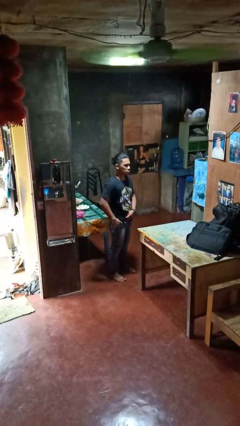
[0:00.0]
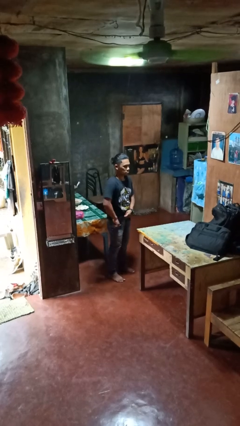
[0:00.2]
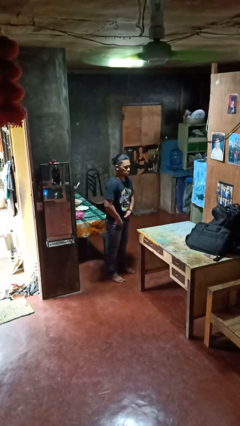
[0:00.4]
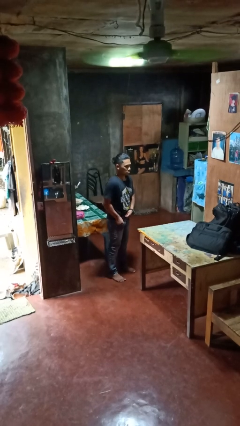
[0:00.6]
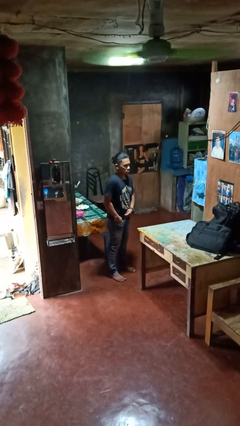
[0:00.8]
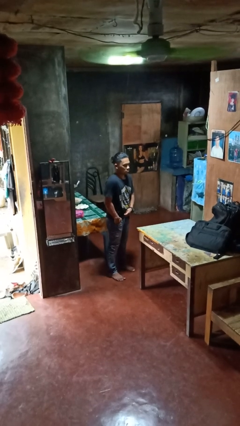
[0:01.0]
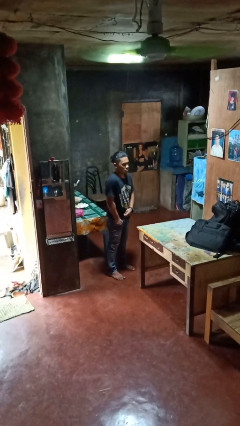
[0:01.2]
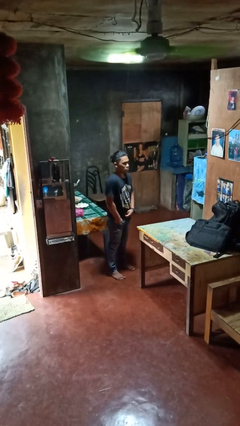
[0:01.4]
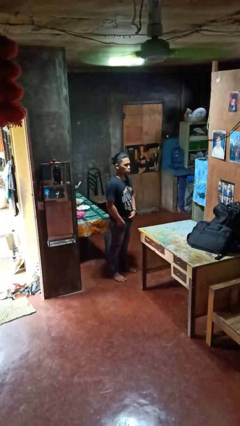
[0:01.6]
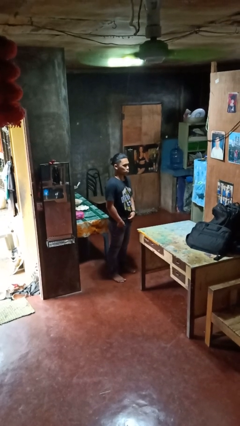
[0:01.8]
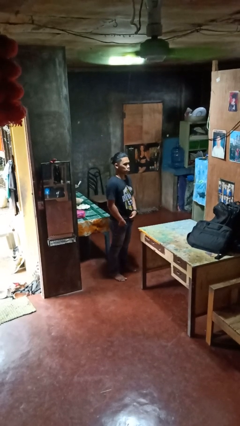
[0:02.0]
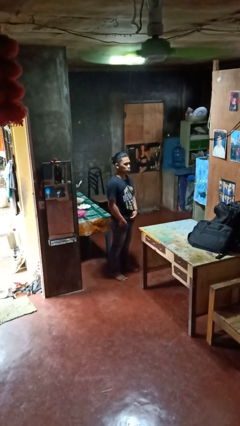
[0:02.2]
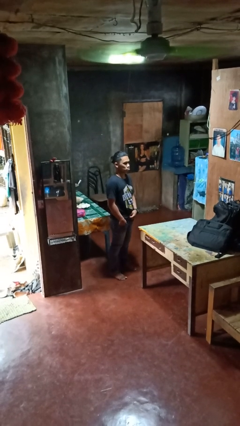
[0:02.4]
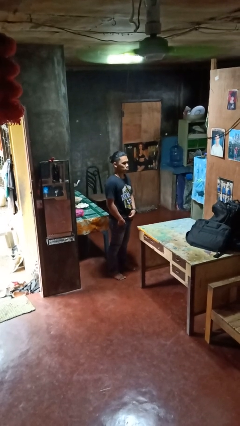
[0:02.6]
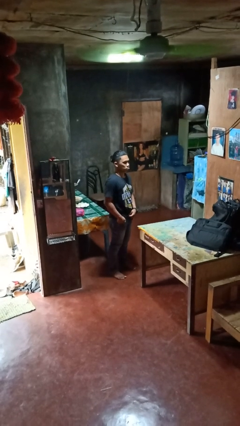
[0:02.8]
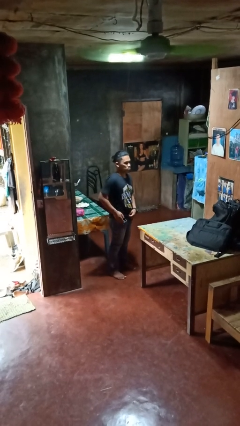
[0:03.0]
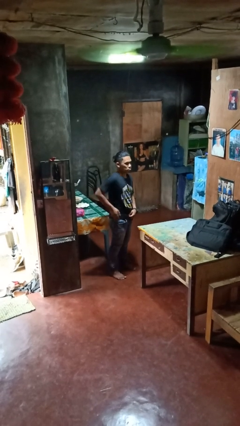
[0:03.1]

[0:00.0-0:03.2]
person puts hands in back pockets

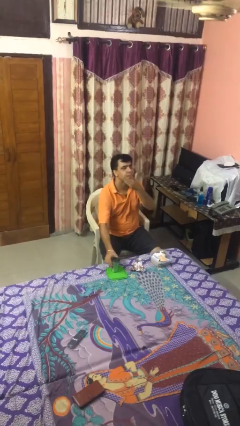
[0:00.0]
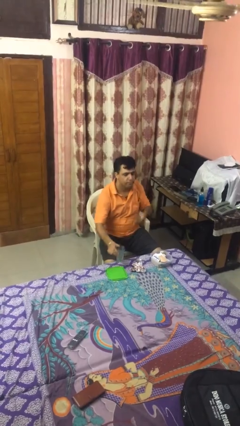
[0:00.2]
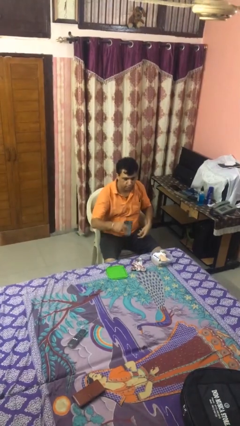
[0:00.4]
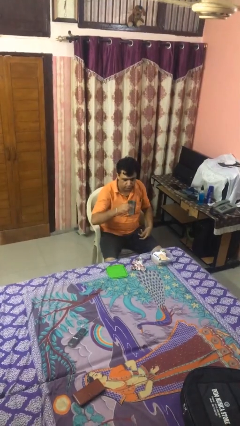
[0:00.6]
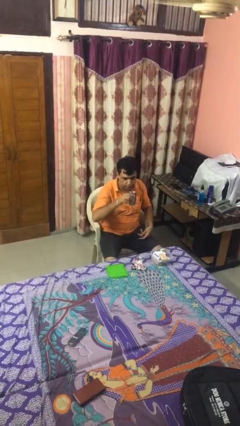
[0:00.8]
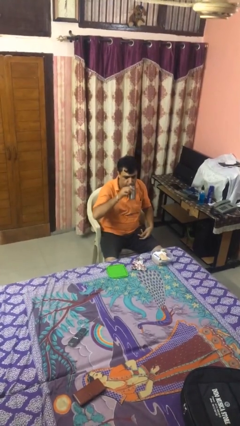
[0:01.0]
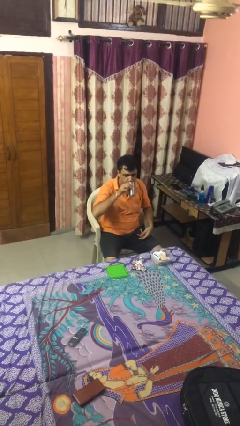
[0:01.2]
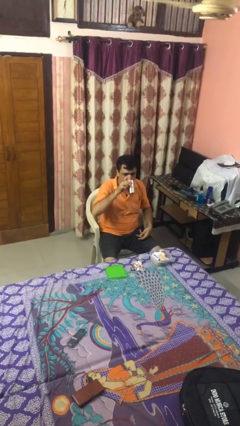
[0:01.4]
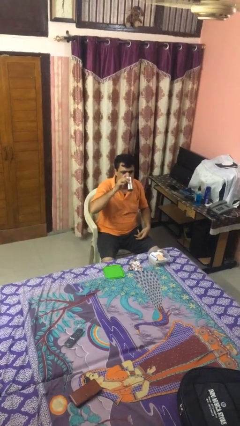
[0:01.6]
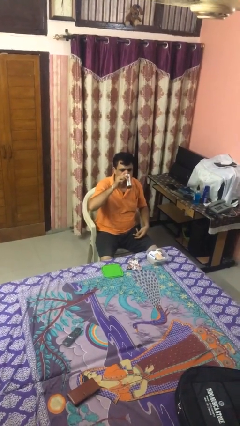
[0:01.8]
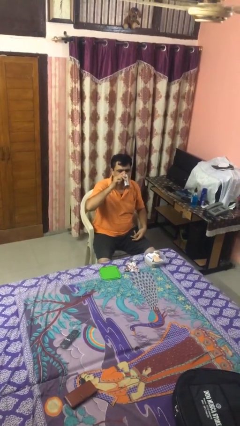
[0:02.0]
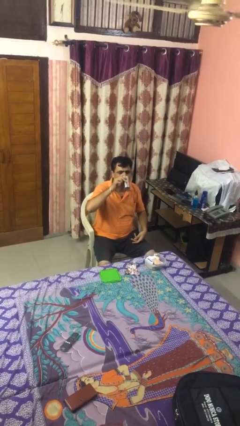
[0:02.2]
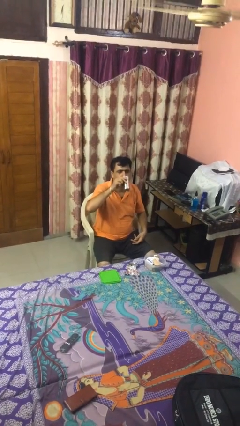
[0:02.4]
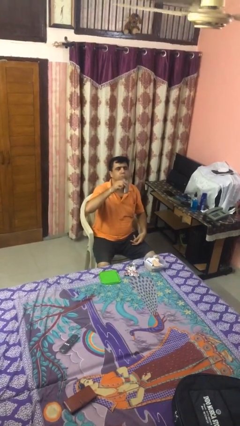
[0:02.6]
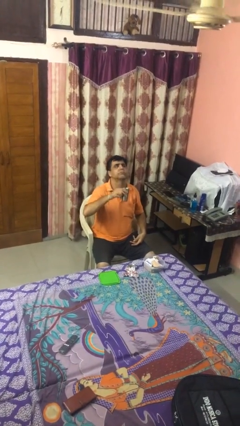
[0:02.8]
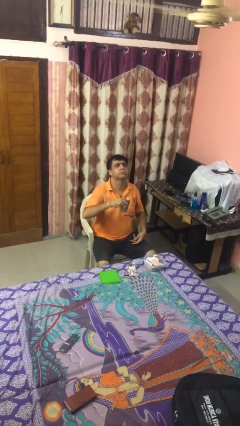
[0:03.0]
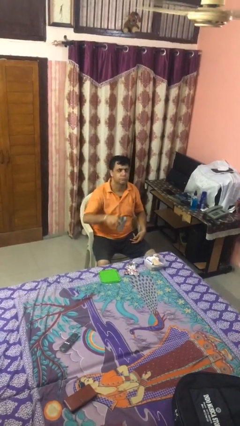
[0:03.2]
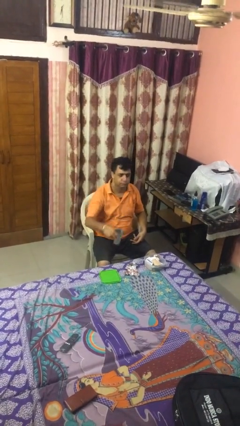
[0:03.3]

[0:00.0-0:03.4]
person drinks from cup

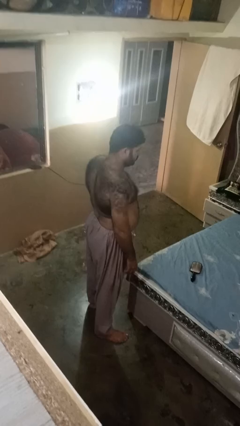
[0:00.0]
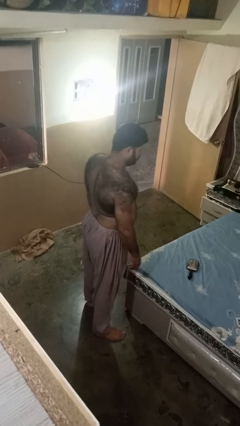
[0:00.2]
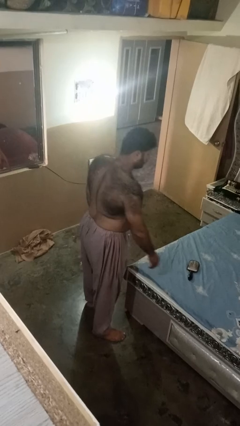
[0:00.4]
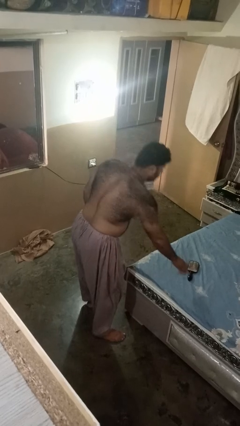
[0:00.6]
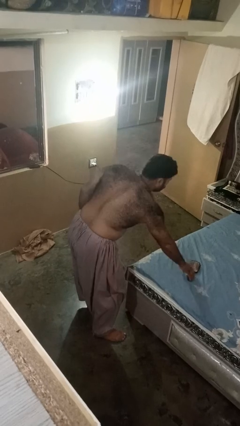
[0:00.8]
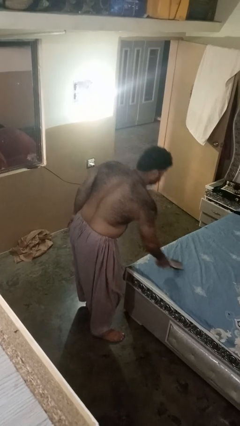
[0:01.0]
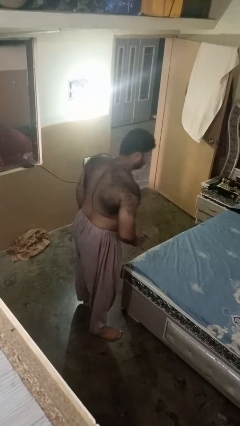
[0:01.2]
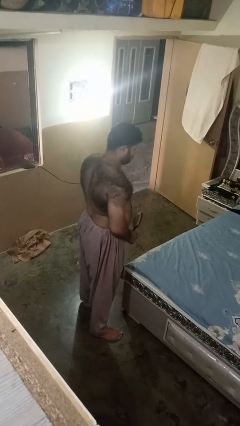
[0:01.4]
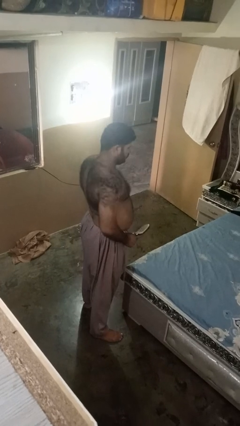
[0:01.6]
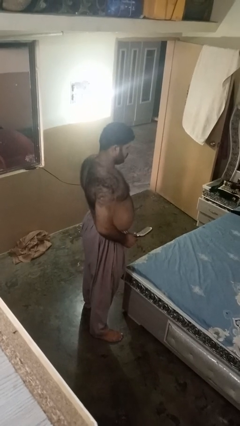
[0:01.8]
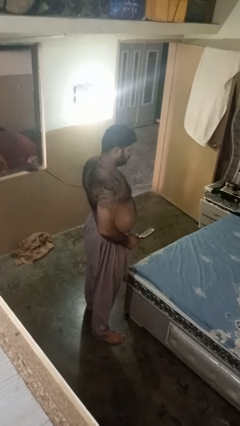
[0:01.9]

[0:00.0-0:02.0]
person picks up object from bed

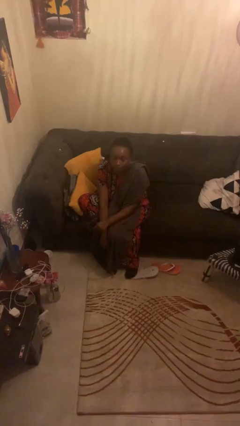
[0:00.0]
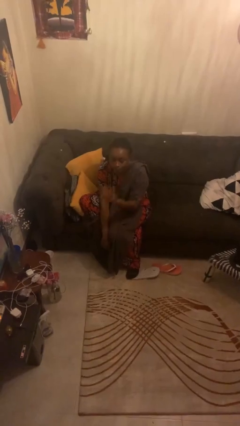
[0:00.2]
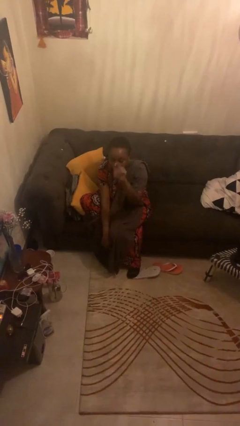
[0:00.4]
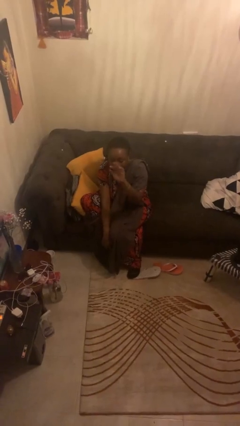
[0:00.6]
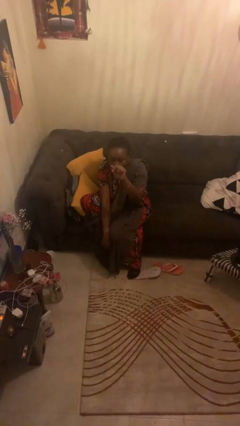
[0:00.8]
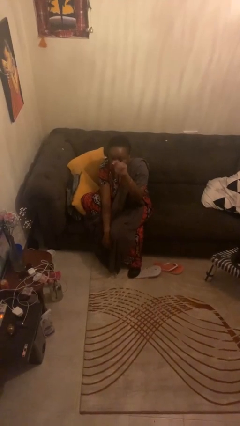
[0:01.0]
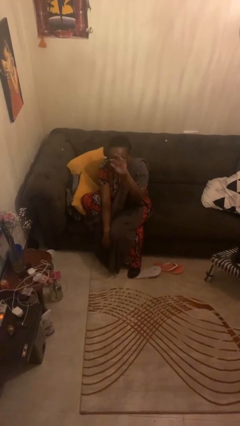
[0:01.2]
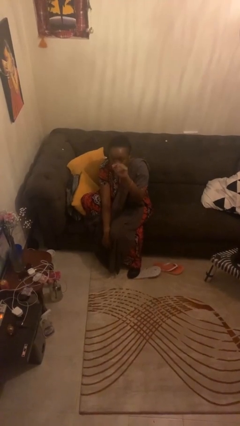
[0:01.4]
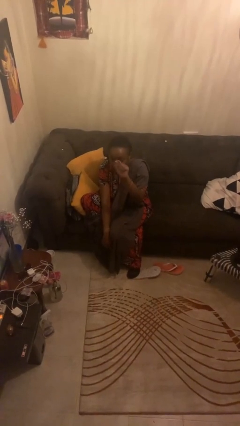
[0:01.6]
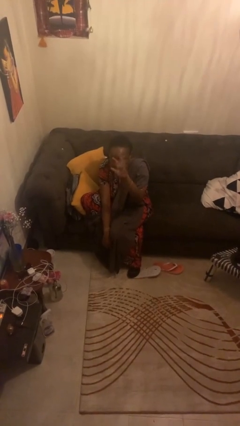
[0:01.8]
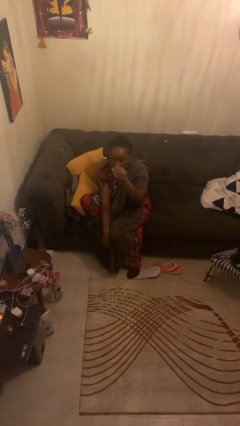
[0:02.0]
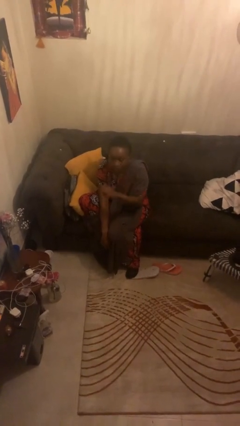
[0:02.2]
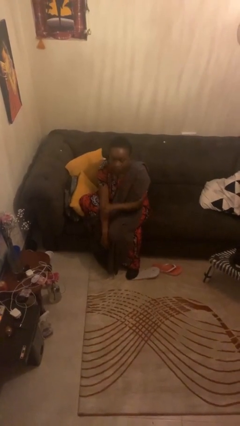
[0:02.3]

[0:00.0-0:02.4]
person gestures come here

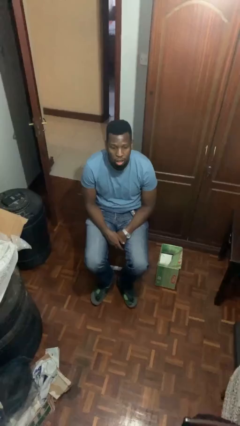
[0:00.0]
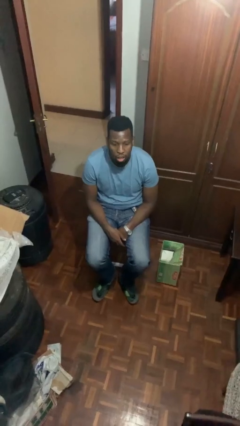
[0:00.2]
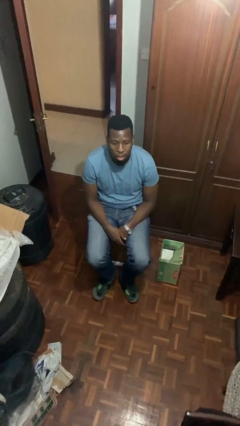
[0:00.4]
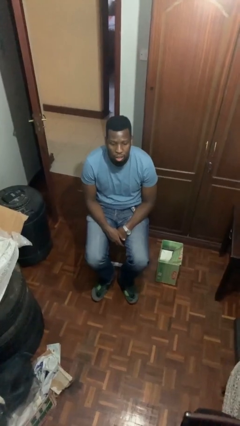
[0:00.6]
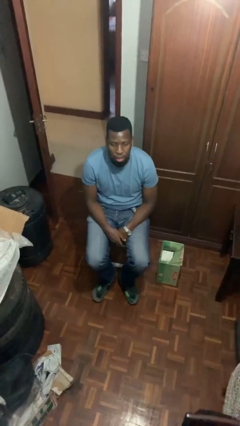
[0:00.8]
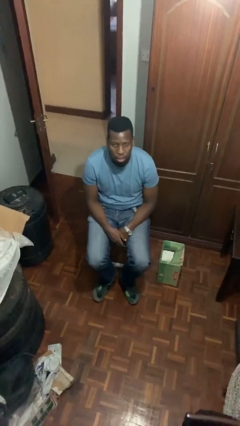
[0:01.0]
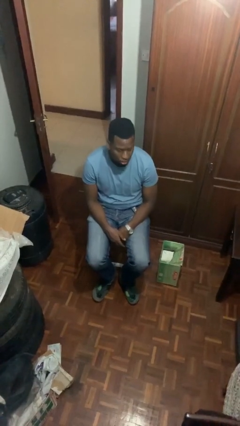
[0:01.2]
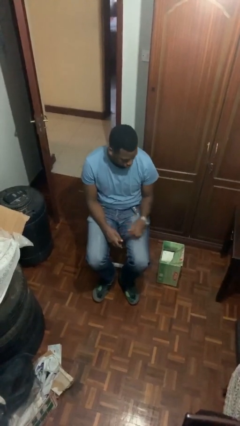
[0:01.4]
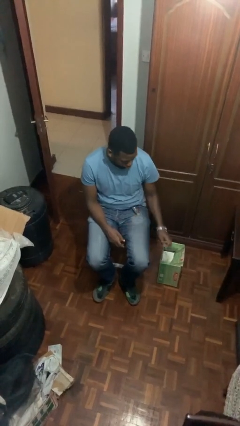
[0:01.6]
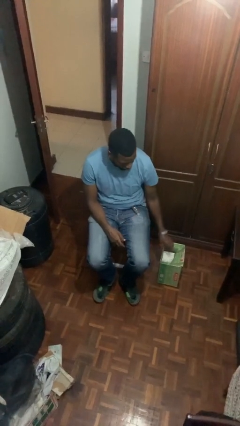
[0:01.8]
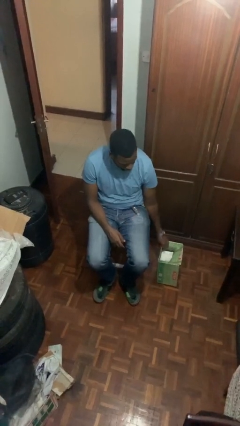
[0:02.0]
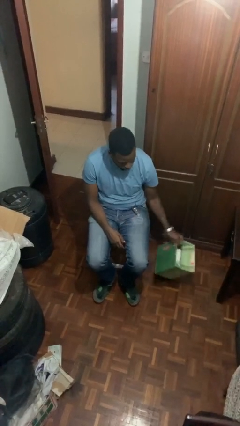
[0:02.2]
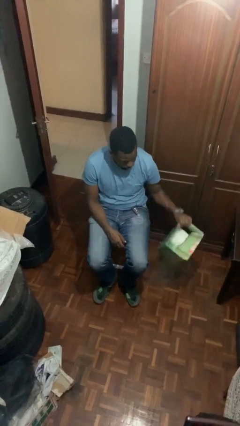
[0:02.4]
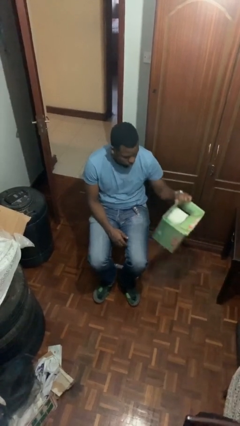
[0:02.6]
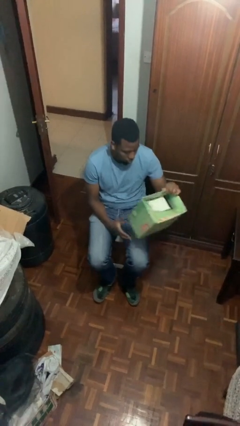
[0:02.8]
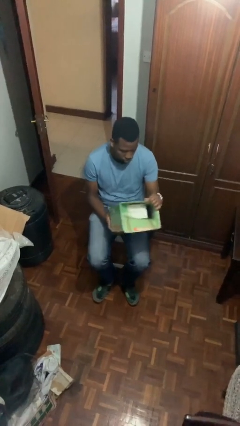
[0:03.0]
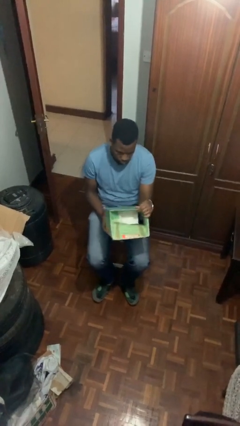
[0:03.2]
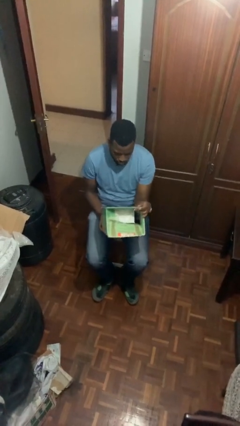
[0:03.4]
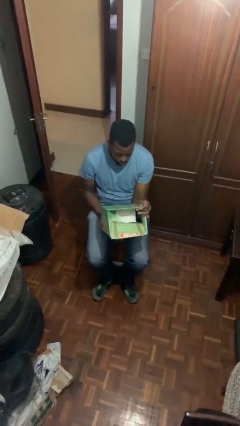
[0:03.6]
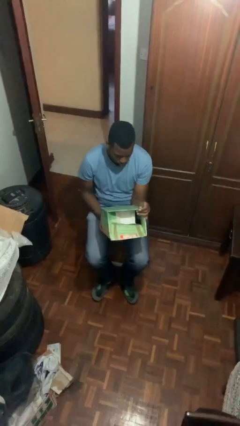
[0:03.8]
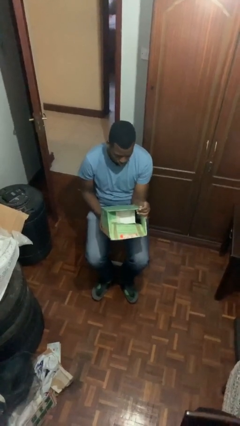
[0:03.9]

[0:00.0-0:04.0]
person picks up object from floor

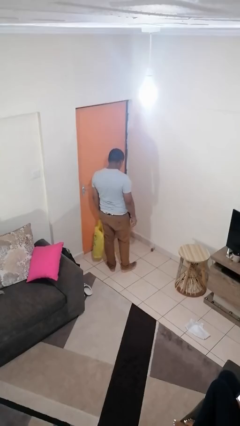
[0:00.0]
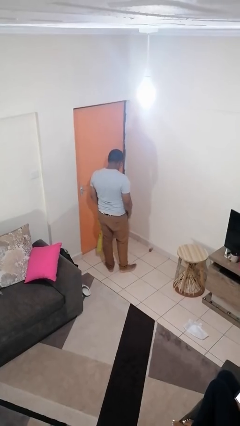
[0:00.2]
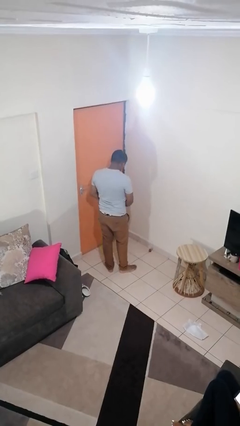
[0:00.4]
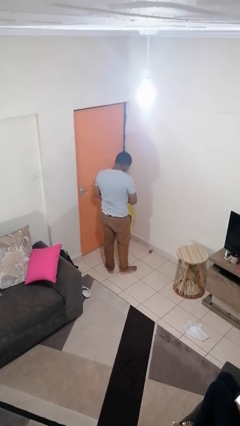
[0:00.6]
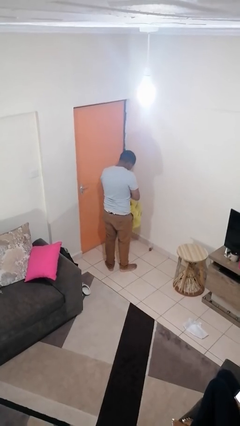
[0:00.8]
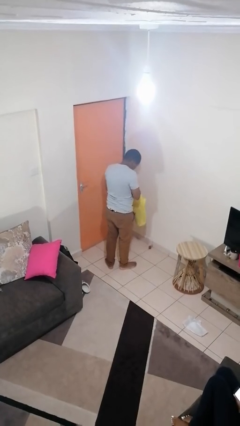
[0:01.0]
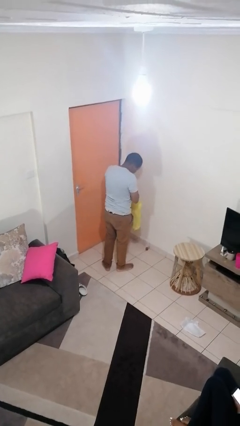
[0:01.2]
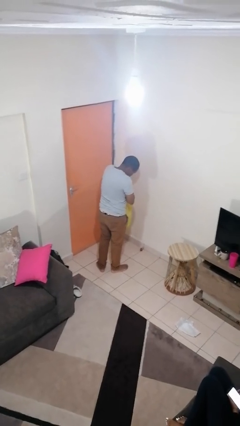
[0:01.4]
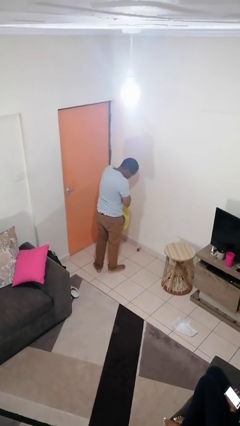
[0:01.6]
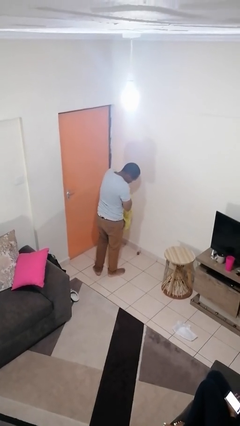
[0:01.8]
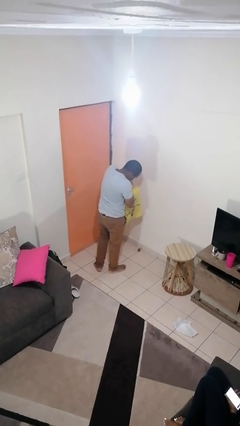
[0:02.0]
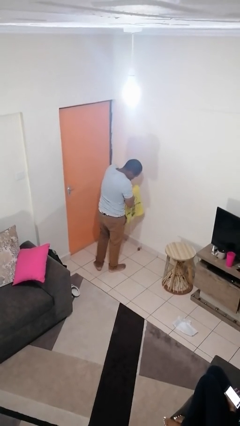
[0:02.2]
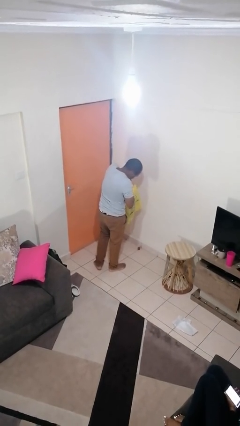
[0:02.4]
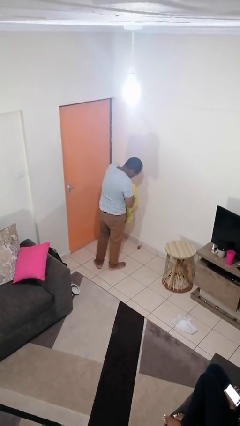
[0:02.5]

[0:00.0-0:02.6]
person searches in bag
